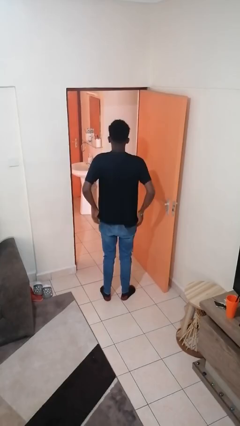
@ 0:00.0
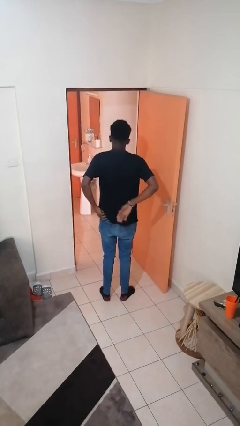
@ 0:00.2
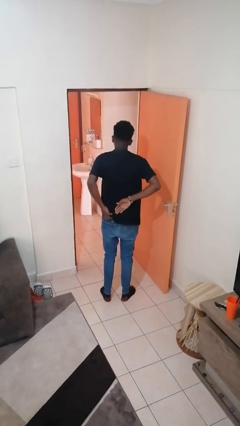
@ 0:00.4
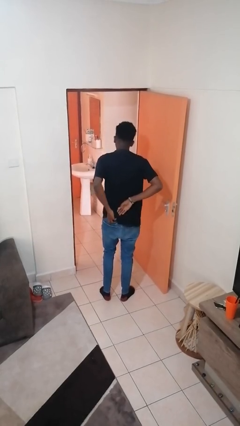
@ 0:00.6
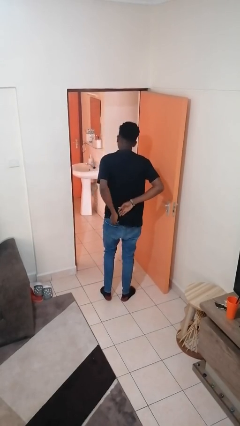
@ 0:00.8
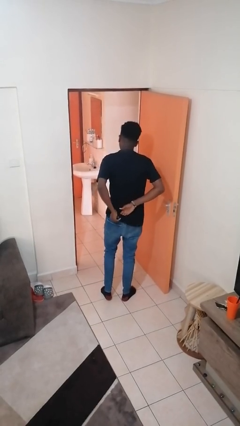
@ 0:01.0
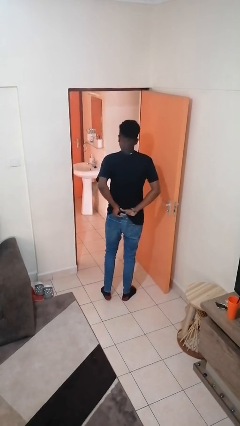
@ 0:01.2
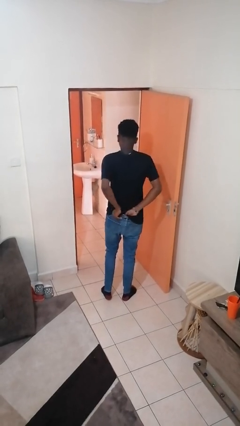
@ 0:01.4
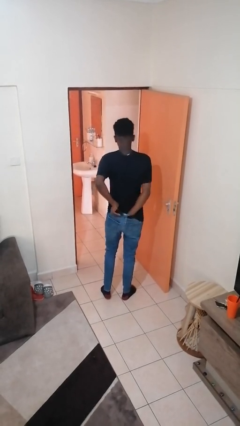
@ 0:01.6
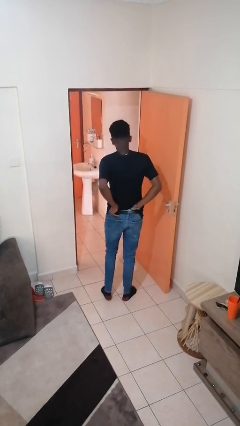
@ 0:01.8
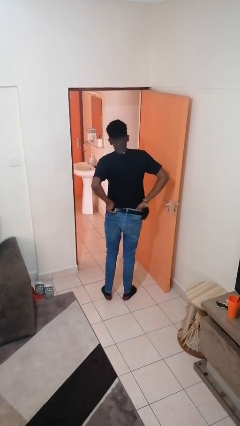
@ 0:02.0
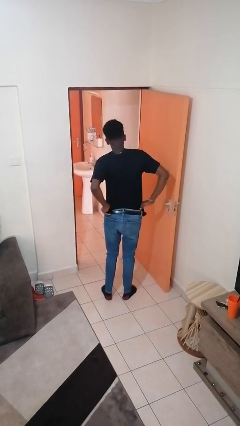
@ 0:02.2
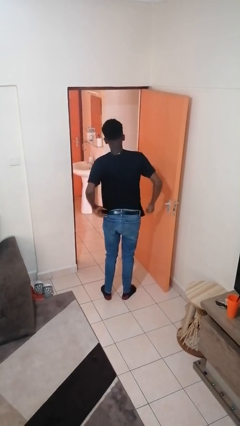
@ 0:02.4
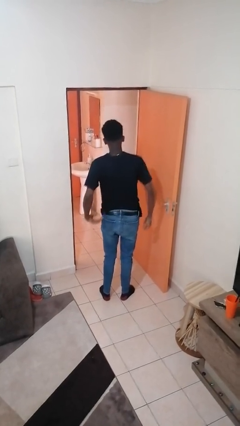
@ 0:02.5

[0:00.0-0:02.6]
person tucks in shirt

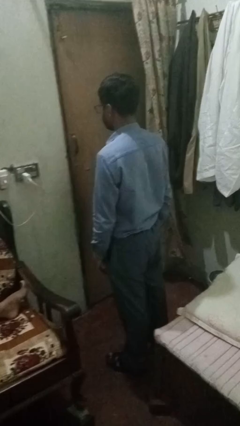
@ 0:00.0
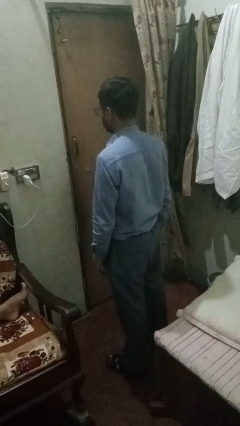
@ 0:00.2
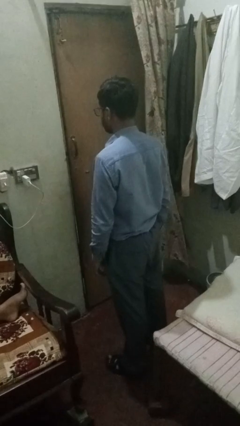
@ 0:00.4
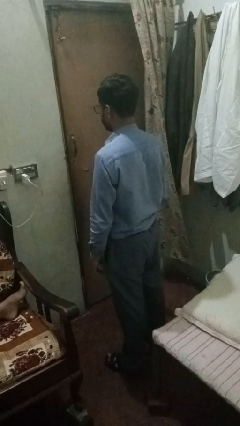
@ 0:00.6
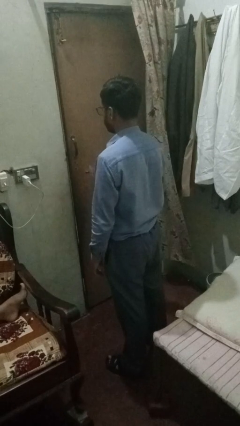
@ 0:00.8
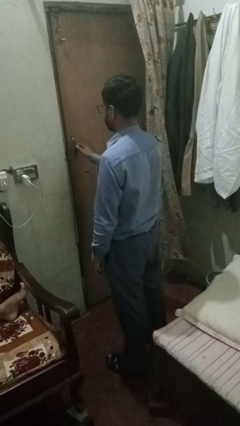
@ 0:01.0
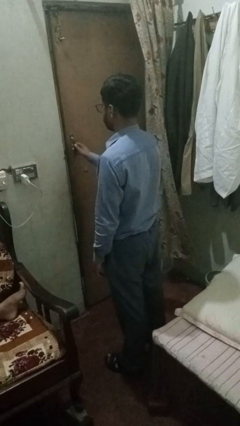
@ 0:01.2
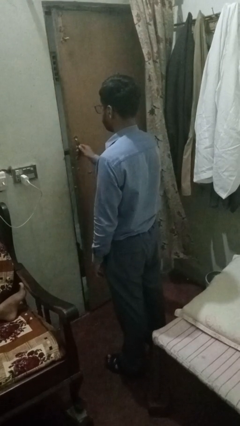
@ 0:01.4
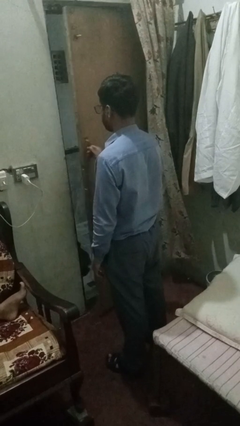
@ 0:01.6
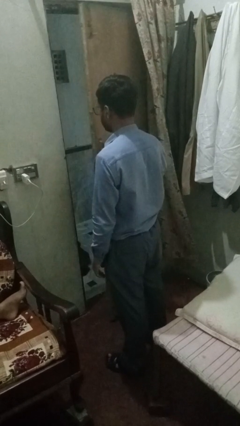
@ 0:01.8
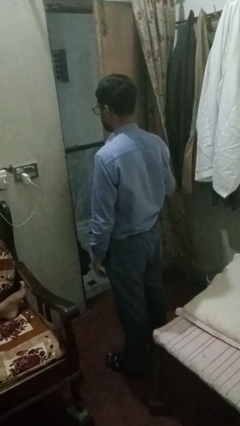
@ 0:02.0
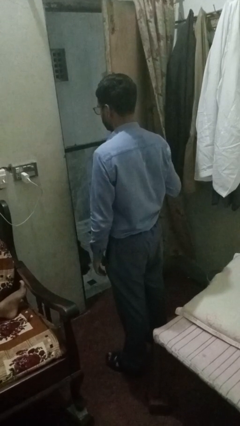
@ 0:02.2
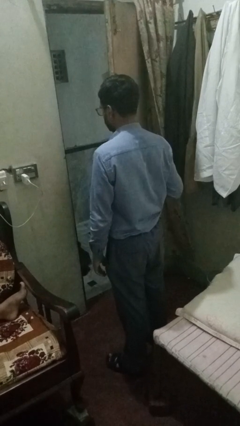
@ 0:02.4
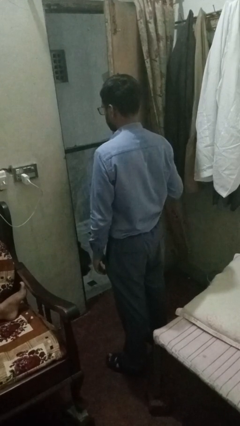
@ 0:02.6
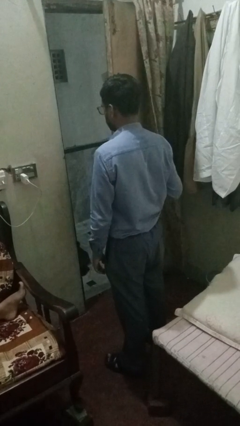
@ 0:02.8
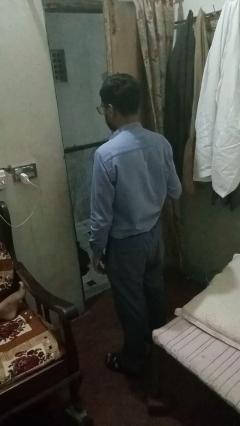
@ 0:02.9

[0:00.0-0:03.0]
person opens sliding door

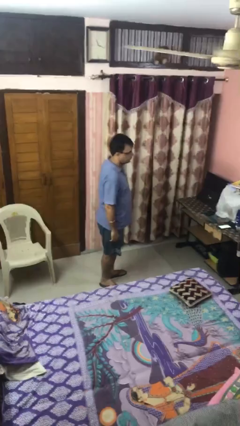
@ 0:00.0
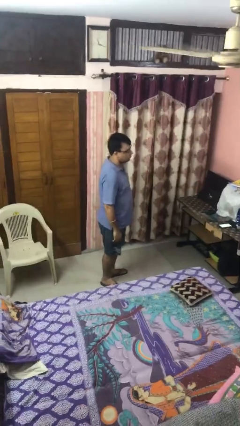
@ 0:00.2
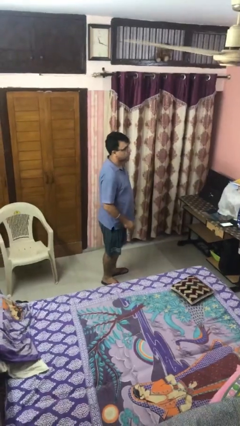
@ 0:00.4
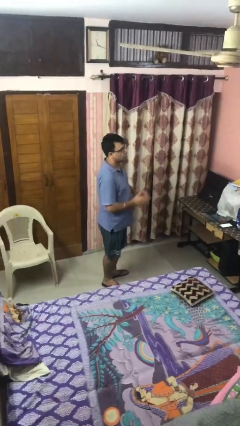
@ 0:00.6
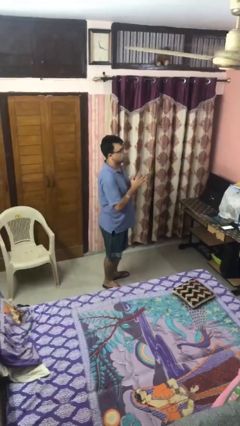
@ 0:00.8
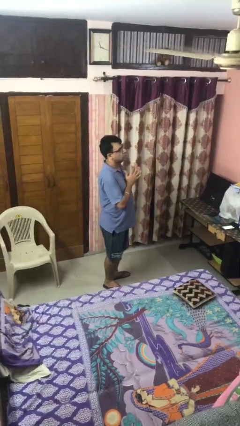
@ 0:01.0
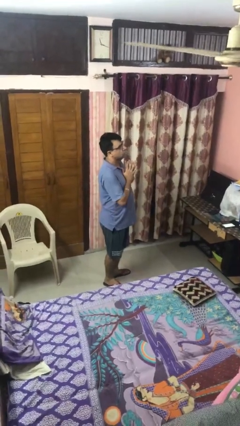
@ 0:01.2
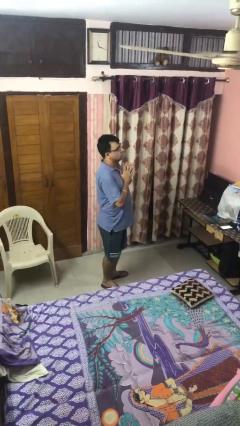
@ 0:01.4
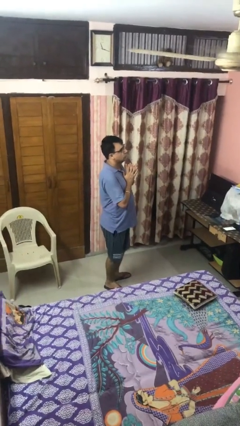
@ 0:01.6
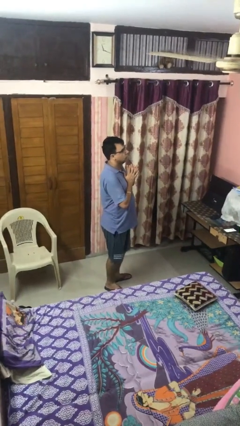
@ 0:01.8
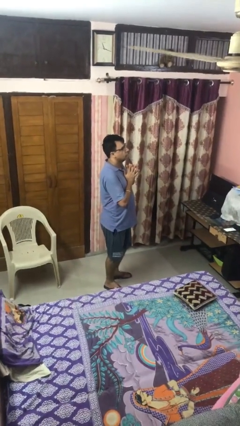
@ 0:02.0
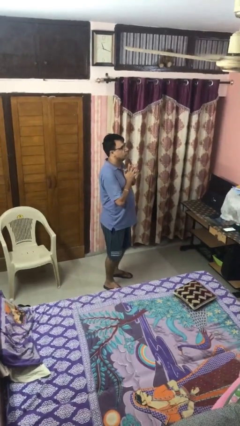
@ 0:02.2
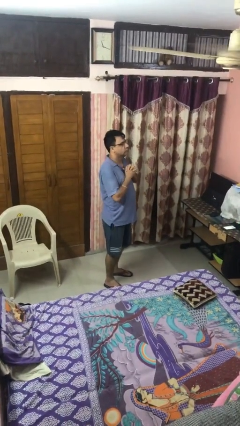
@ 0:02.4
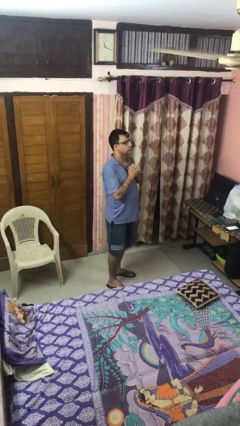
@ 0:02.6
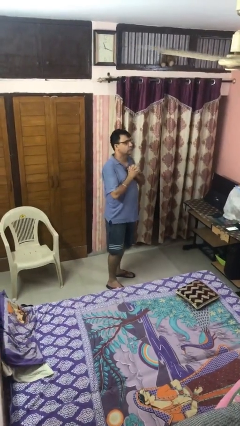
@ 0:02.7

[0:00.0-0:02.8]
person prays

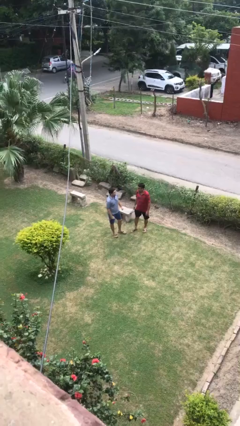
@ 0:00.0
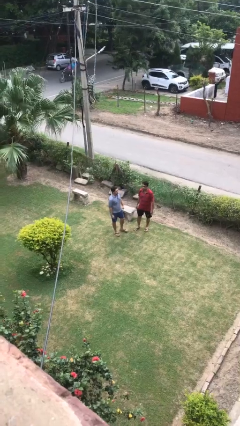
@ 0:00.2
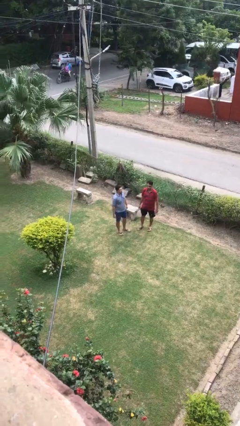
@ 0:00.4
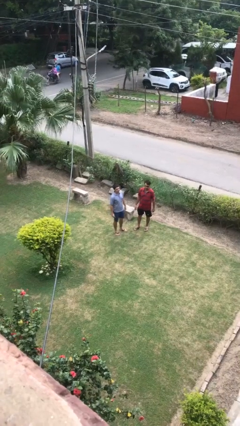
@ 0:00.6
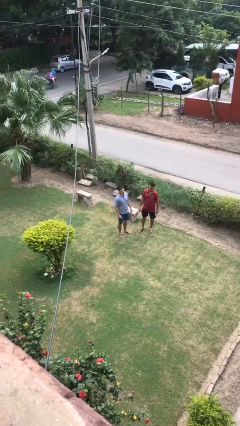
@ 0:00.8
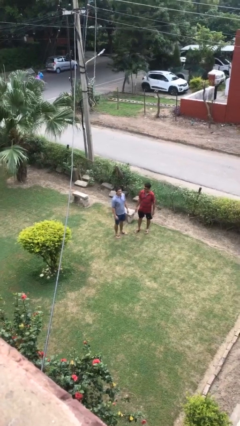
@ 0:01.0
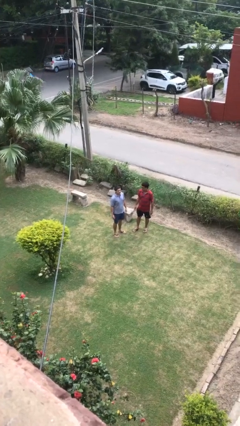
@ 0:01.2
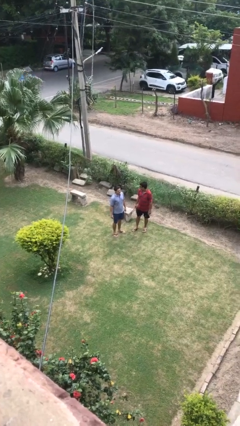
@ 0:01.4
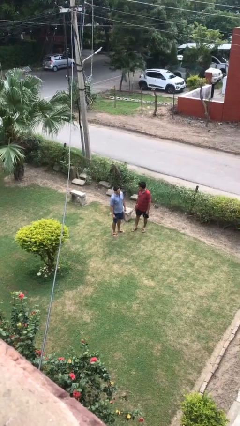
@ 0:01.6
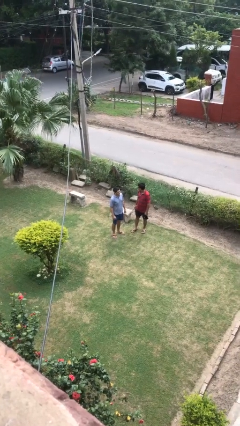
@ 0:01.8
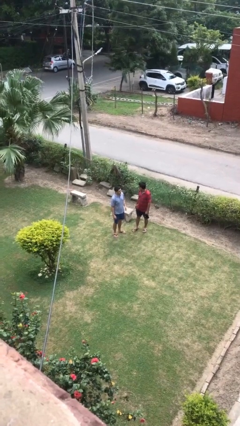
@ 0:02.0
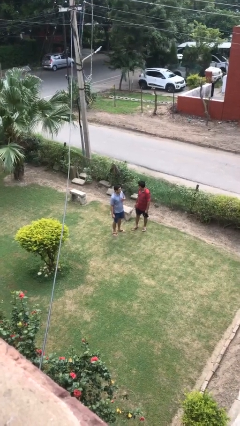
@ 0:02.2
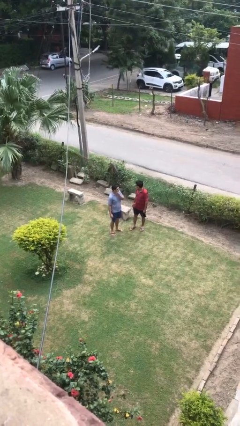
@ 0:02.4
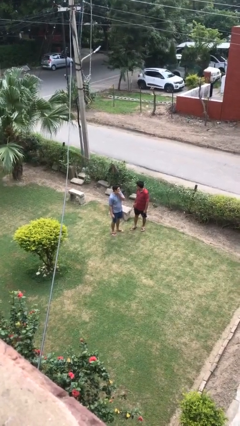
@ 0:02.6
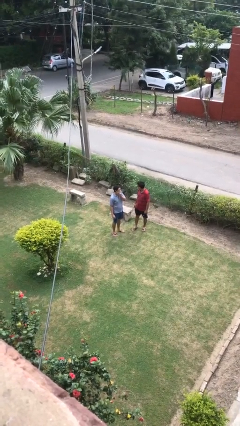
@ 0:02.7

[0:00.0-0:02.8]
person talks to person

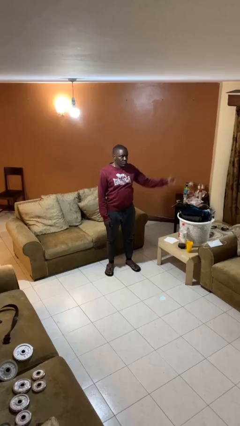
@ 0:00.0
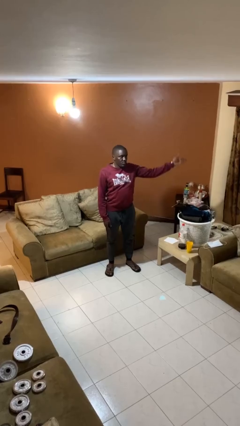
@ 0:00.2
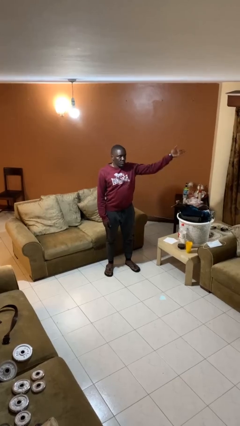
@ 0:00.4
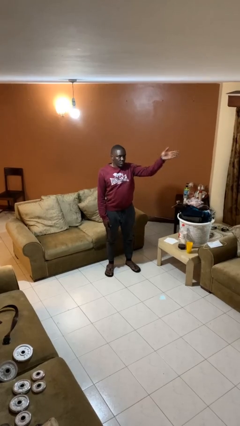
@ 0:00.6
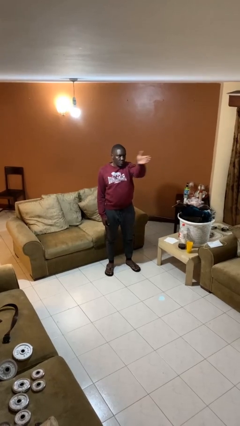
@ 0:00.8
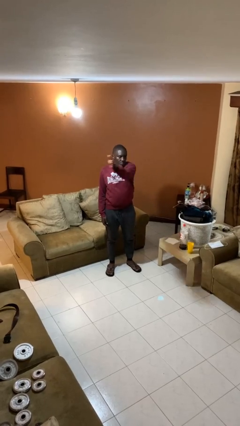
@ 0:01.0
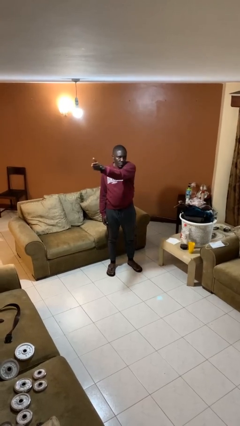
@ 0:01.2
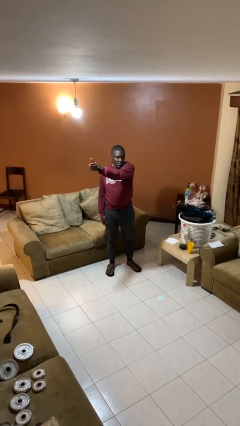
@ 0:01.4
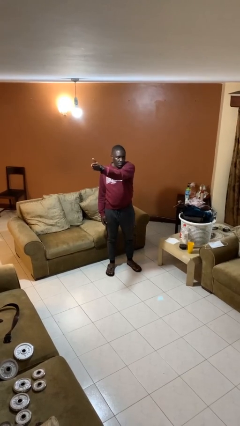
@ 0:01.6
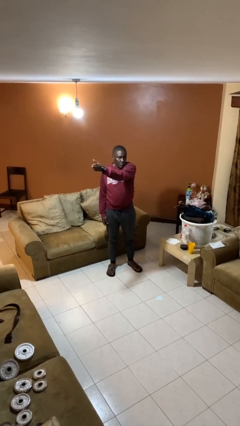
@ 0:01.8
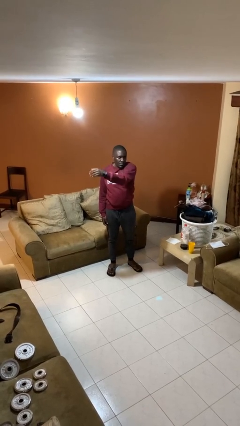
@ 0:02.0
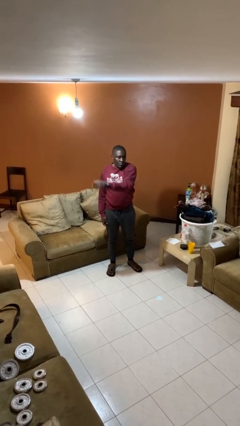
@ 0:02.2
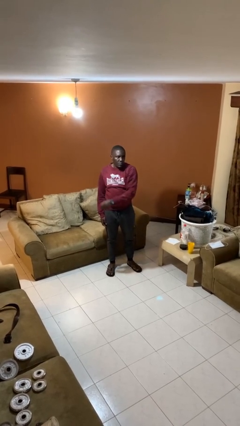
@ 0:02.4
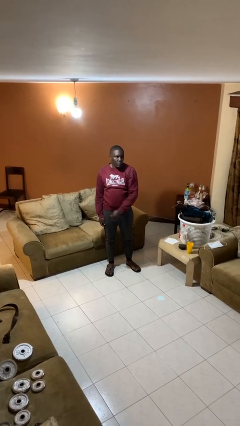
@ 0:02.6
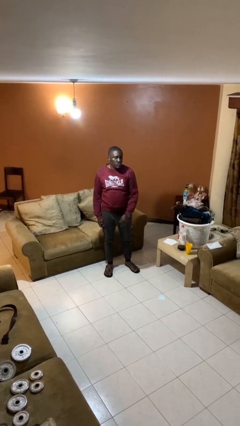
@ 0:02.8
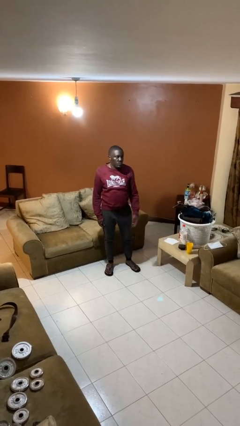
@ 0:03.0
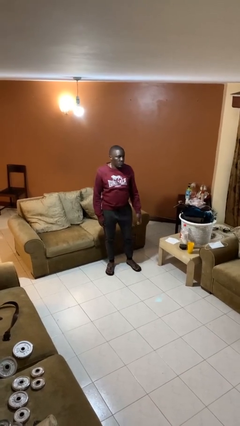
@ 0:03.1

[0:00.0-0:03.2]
person gestures swipe right

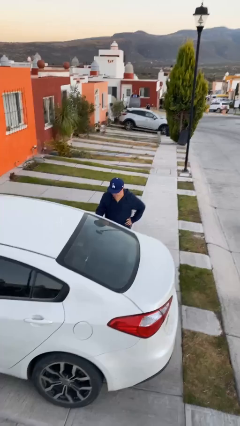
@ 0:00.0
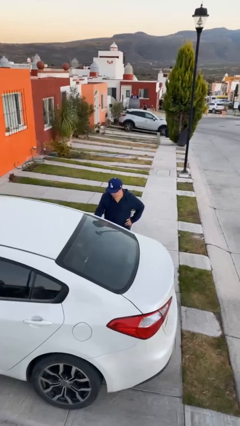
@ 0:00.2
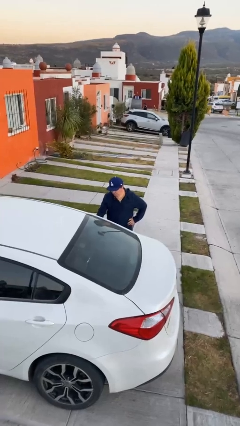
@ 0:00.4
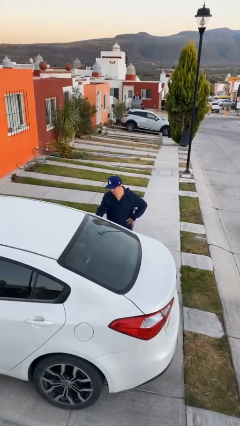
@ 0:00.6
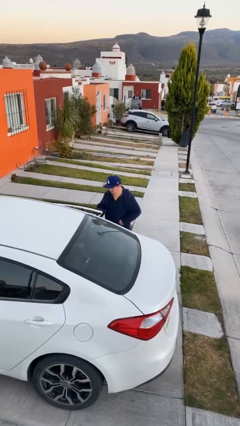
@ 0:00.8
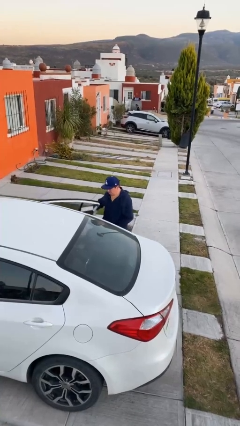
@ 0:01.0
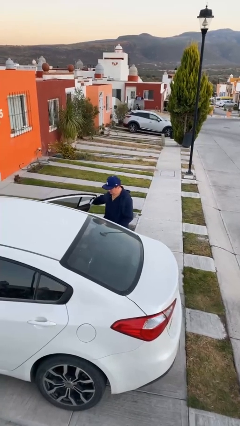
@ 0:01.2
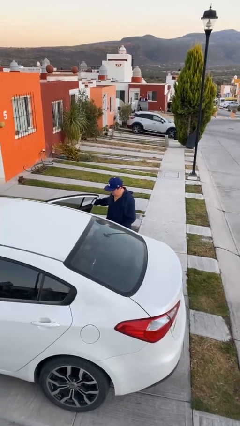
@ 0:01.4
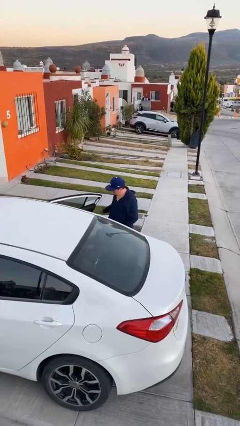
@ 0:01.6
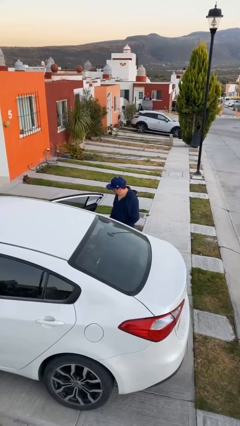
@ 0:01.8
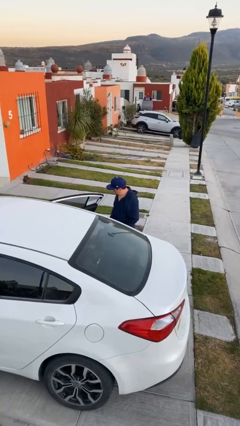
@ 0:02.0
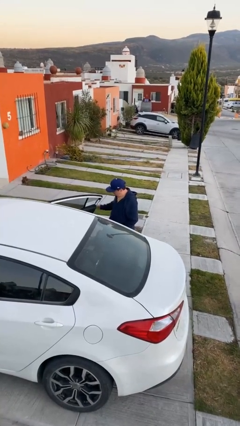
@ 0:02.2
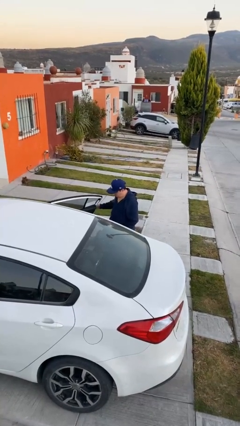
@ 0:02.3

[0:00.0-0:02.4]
person opens car door
